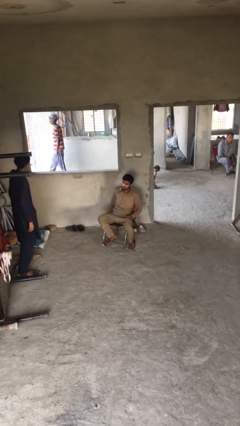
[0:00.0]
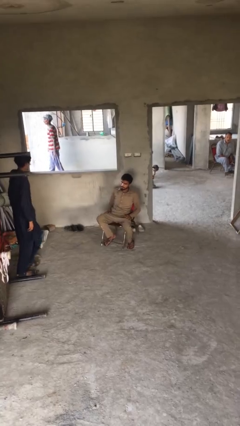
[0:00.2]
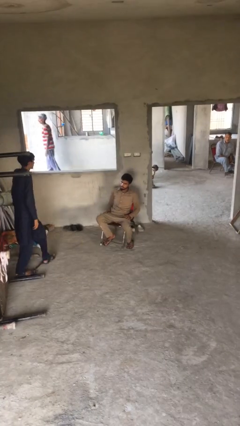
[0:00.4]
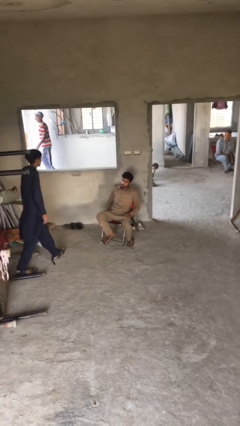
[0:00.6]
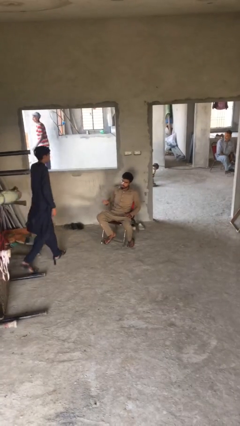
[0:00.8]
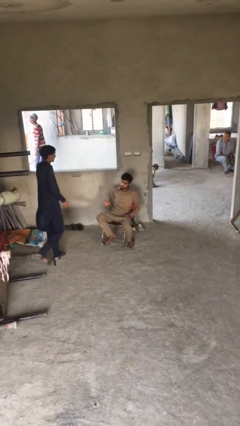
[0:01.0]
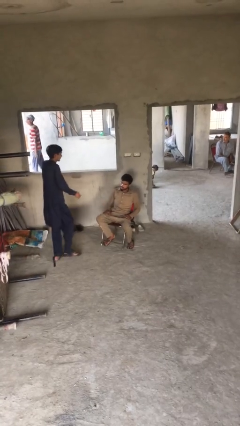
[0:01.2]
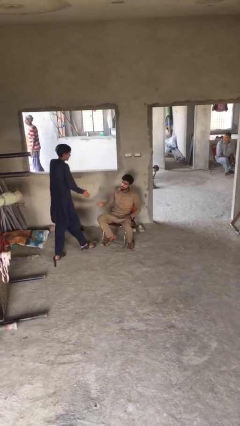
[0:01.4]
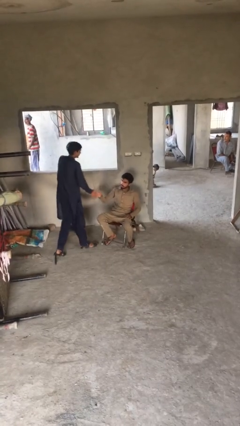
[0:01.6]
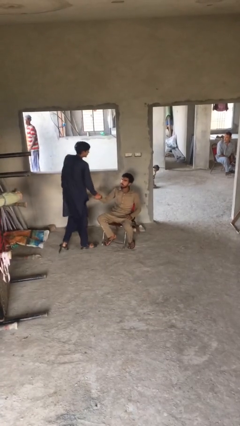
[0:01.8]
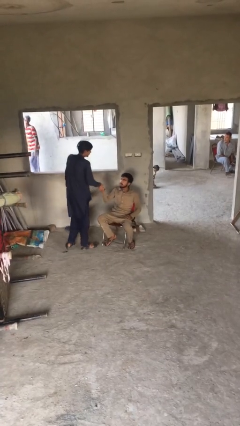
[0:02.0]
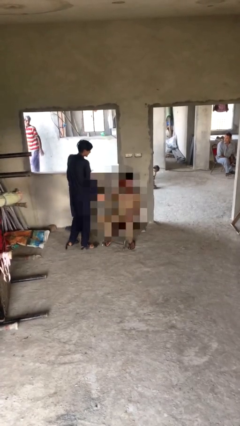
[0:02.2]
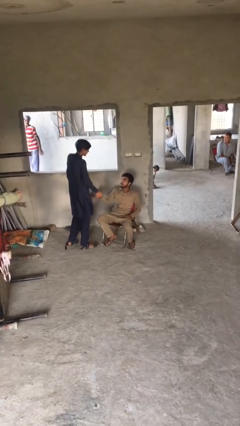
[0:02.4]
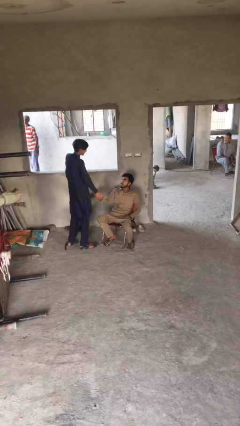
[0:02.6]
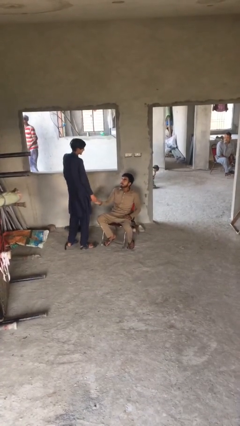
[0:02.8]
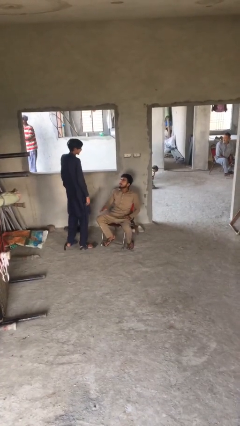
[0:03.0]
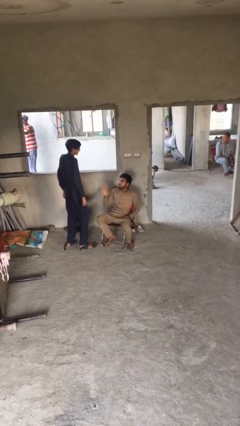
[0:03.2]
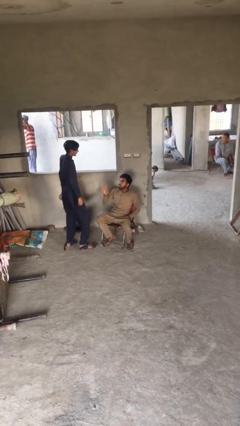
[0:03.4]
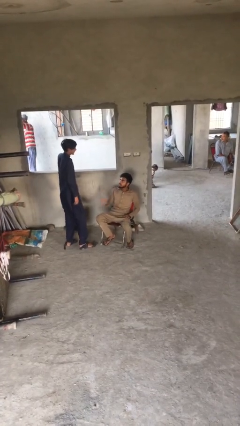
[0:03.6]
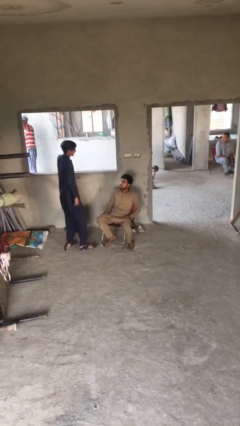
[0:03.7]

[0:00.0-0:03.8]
person shakes hand

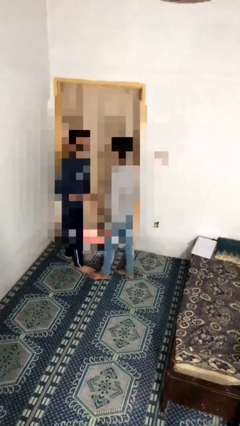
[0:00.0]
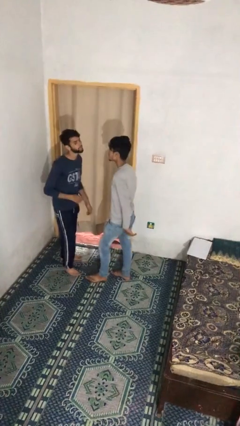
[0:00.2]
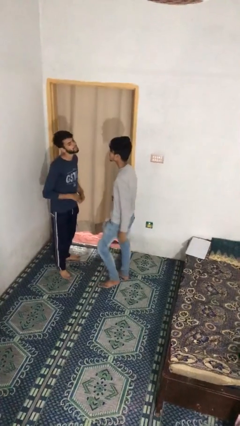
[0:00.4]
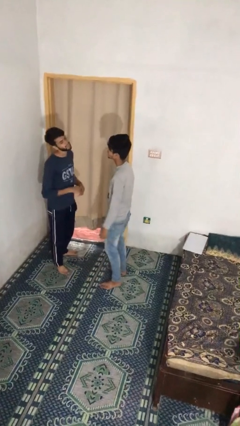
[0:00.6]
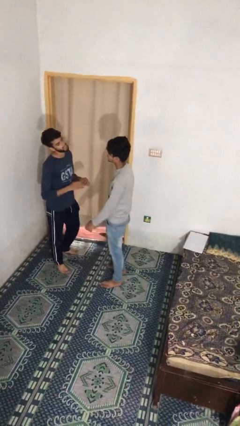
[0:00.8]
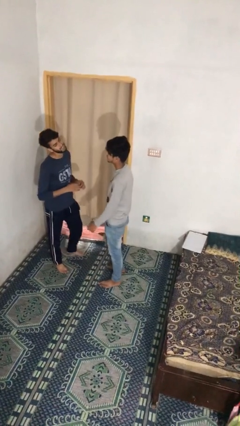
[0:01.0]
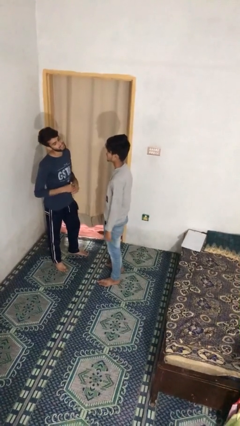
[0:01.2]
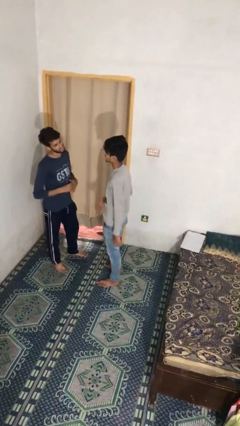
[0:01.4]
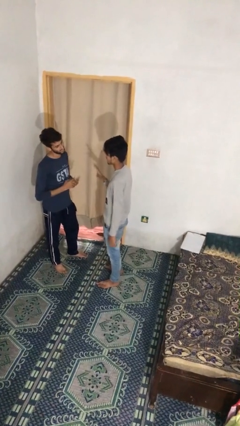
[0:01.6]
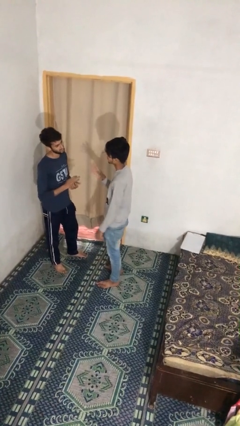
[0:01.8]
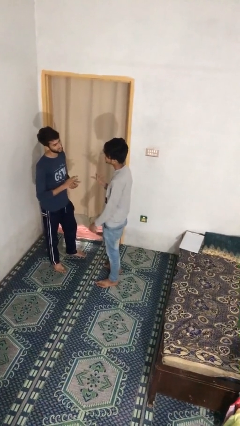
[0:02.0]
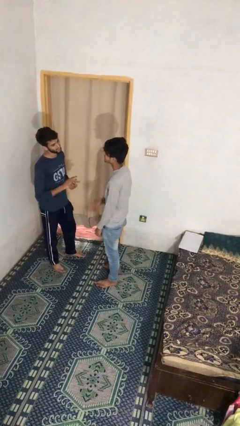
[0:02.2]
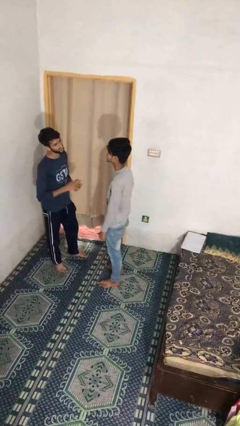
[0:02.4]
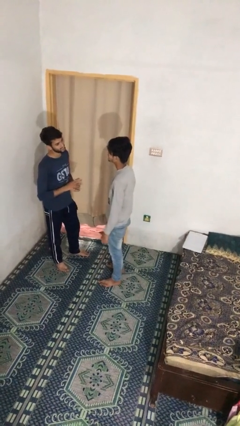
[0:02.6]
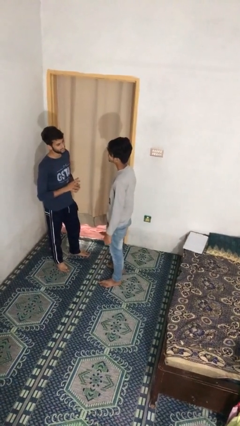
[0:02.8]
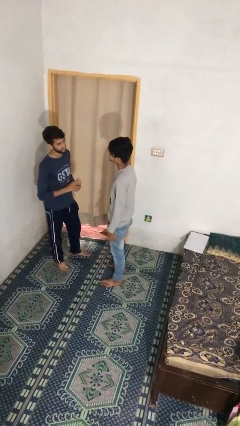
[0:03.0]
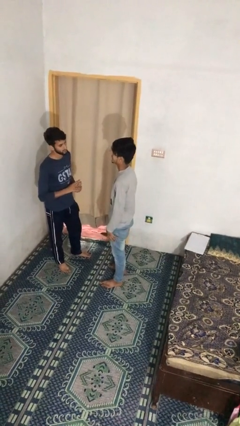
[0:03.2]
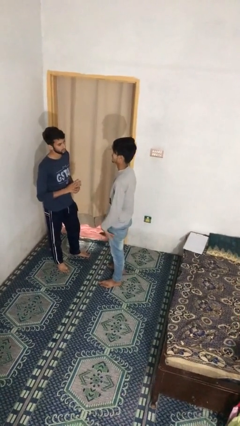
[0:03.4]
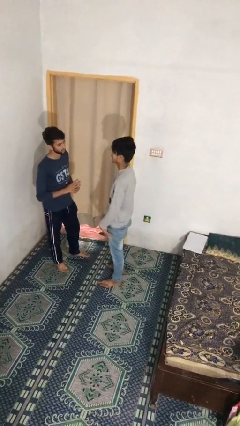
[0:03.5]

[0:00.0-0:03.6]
person talks to person

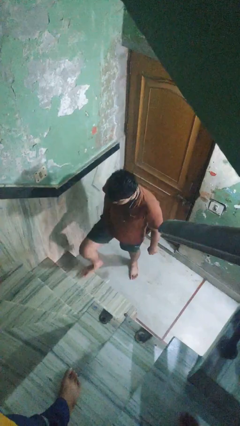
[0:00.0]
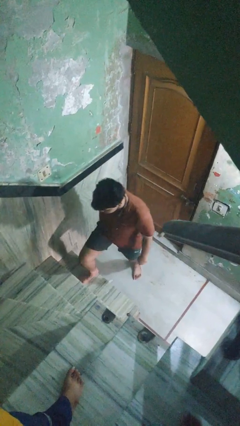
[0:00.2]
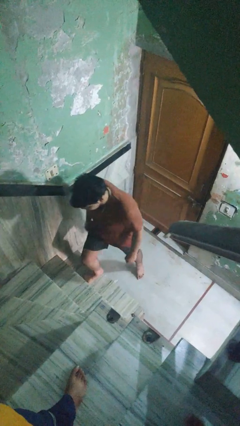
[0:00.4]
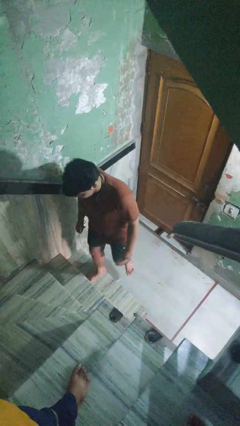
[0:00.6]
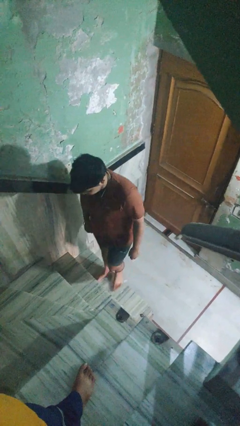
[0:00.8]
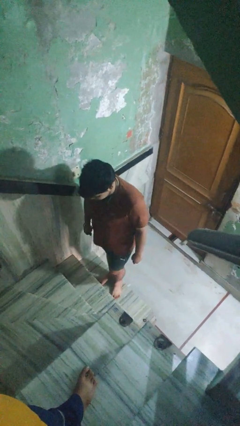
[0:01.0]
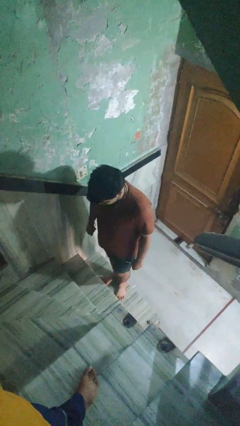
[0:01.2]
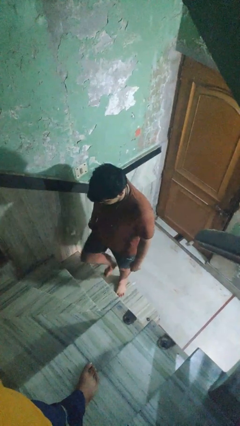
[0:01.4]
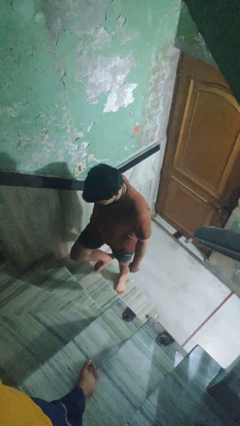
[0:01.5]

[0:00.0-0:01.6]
person climbs up stairs
